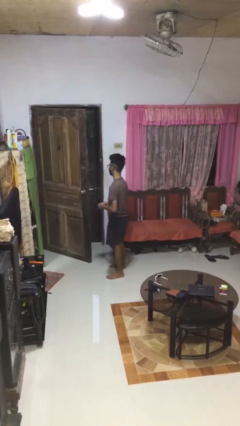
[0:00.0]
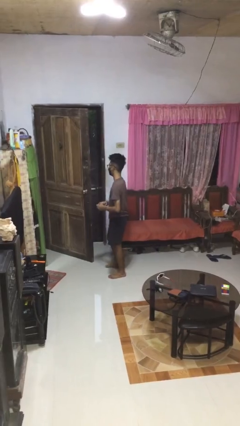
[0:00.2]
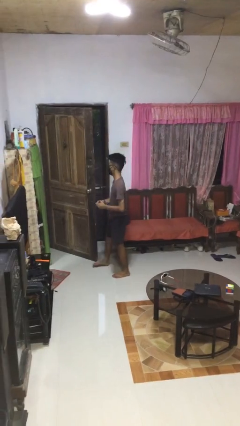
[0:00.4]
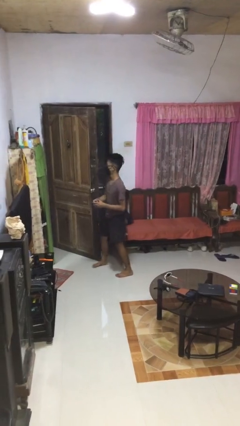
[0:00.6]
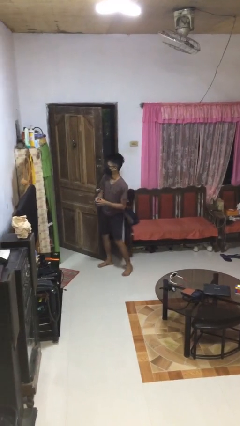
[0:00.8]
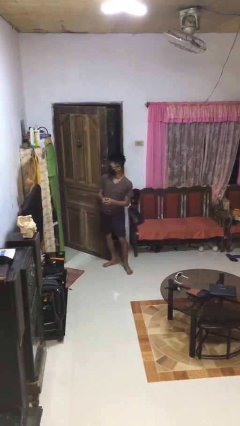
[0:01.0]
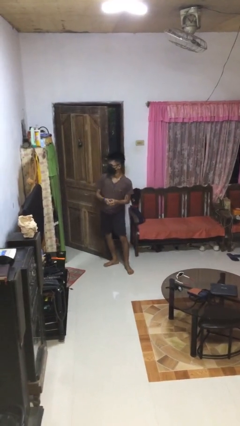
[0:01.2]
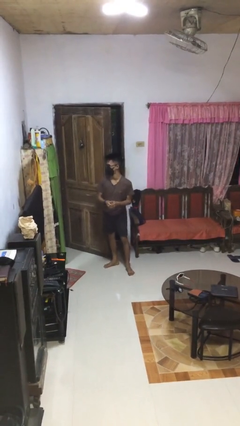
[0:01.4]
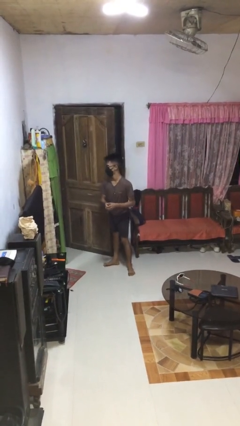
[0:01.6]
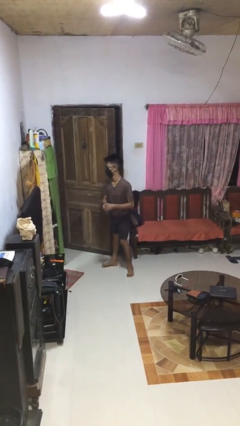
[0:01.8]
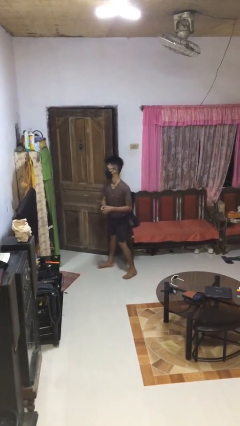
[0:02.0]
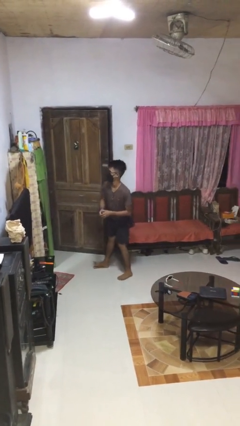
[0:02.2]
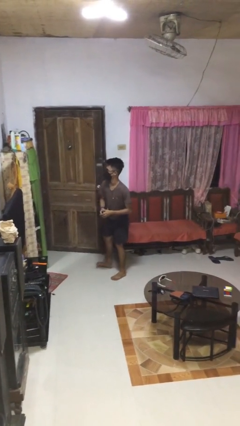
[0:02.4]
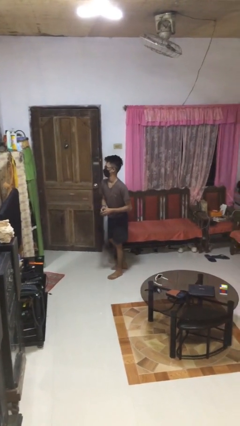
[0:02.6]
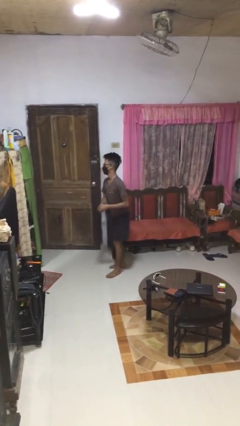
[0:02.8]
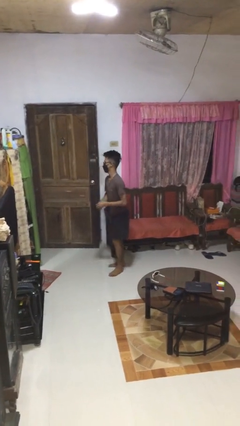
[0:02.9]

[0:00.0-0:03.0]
person closes door with hip

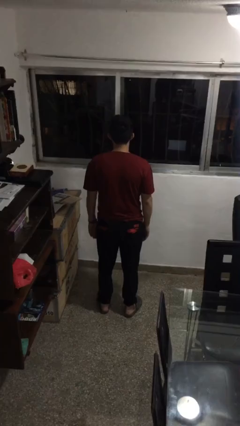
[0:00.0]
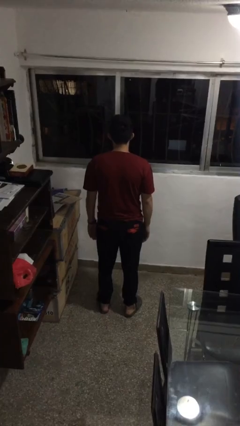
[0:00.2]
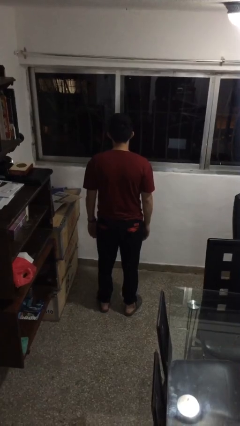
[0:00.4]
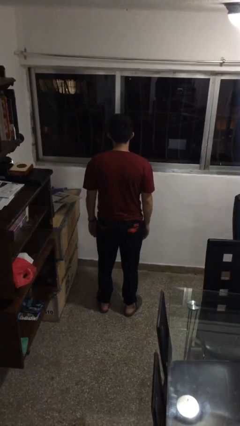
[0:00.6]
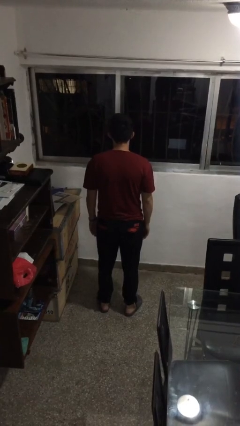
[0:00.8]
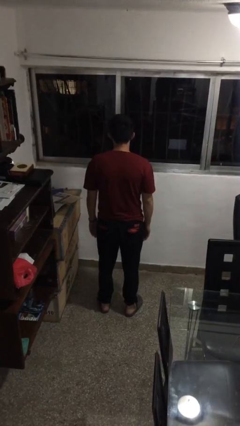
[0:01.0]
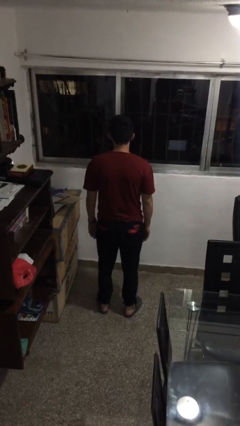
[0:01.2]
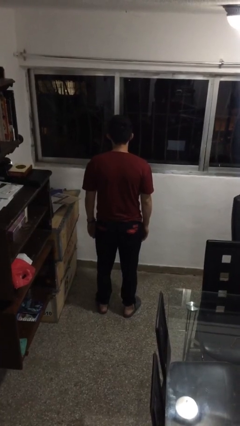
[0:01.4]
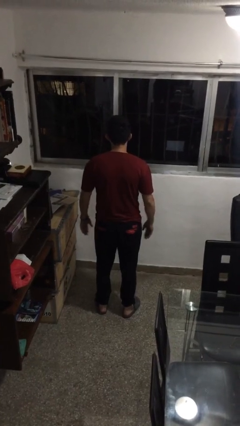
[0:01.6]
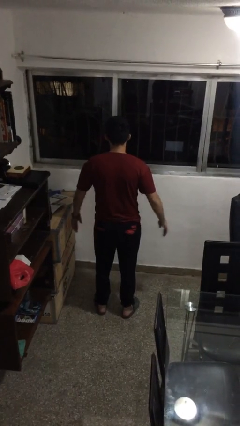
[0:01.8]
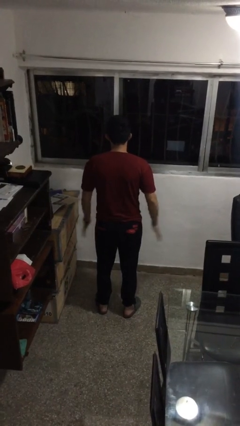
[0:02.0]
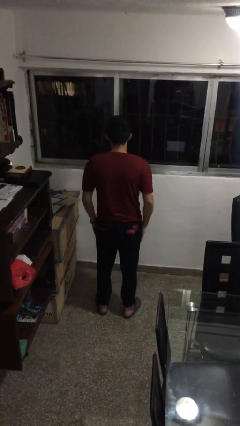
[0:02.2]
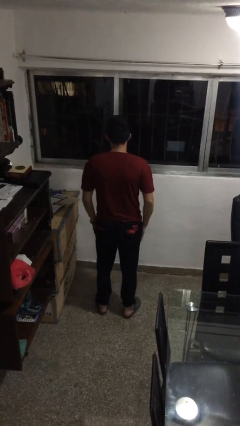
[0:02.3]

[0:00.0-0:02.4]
person slaps hands on thighs

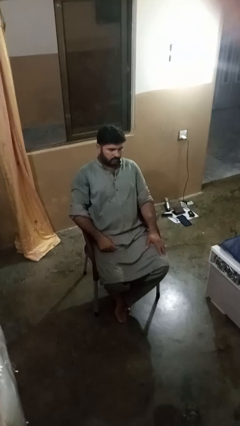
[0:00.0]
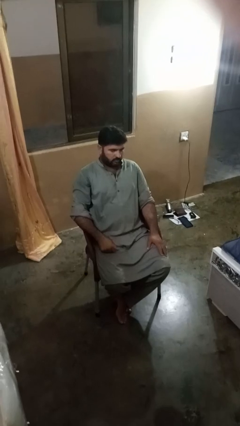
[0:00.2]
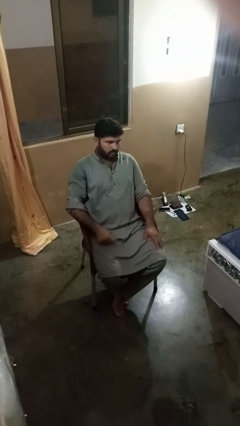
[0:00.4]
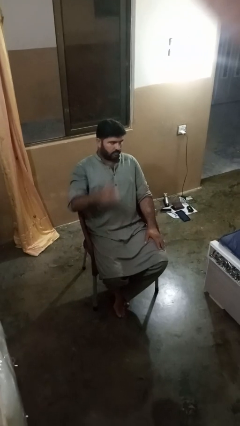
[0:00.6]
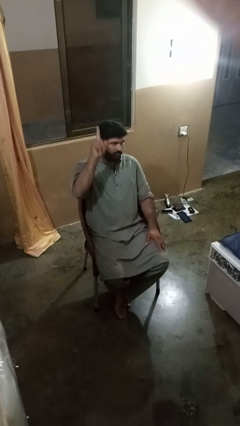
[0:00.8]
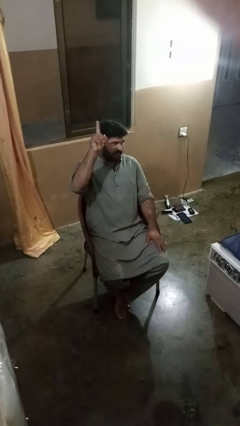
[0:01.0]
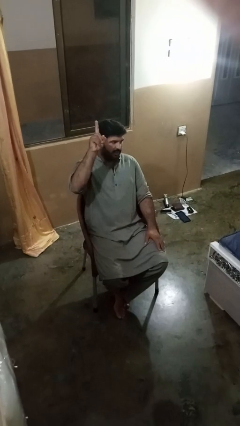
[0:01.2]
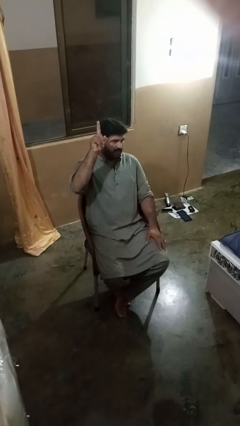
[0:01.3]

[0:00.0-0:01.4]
person gestures number one

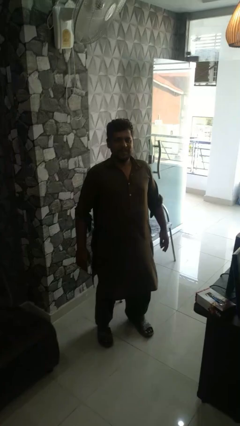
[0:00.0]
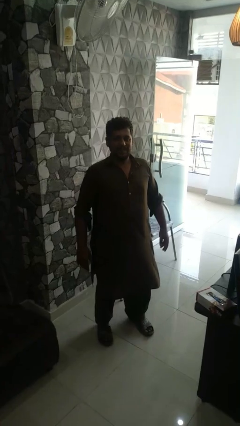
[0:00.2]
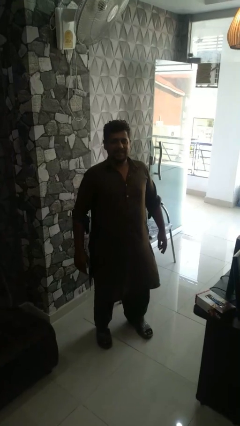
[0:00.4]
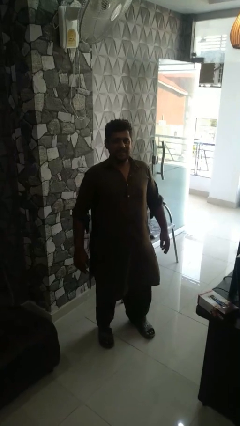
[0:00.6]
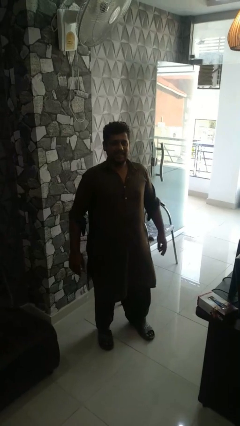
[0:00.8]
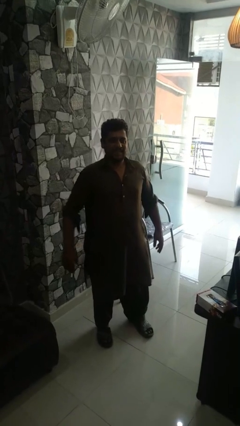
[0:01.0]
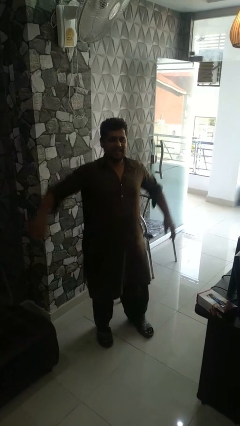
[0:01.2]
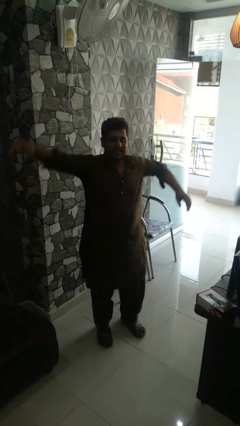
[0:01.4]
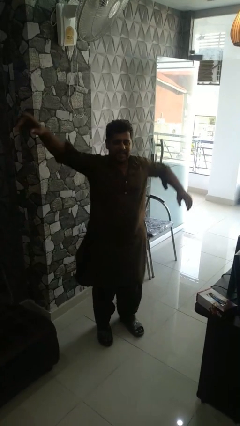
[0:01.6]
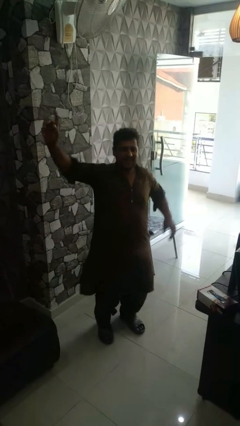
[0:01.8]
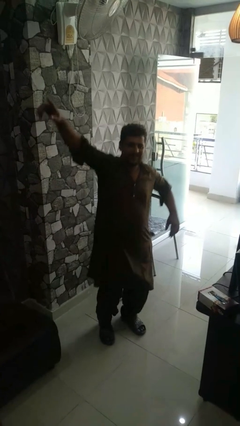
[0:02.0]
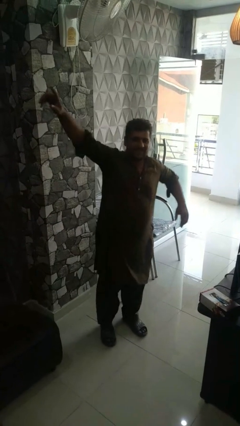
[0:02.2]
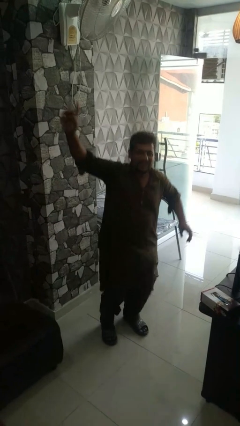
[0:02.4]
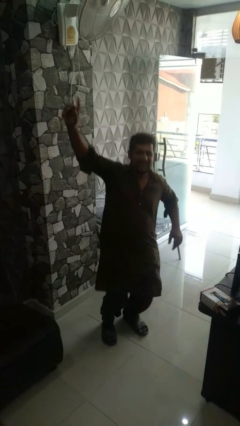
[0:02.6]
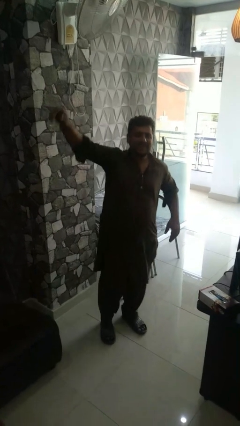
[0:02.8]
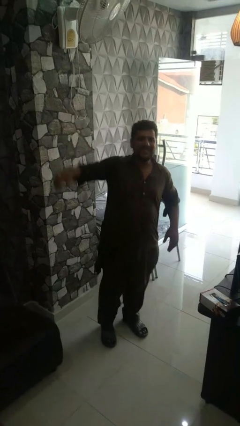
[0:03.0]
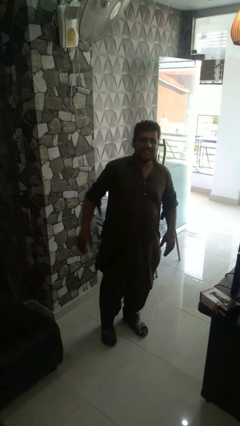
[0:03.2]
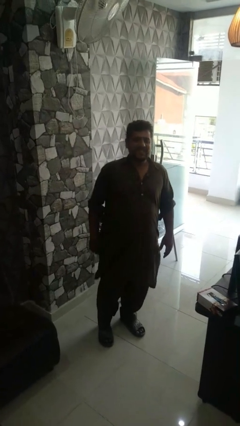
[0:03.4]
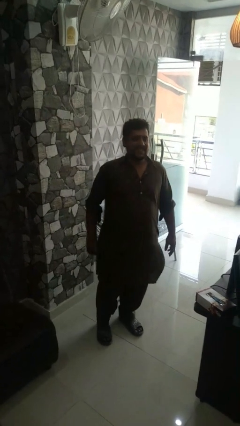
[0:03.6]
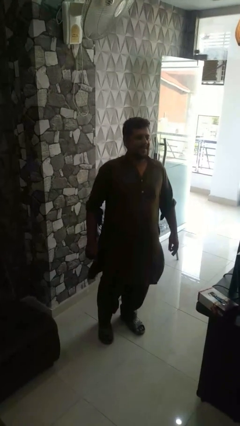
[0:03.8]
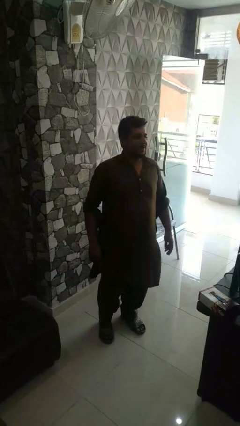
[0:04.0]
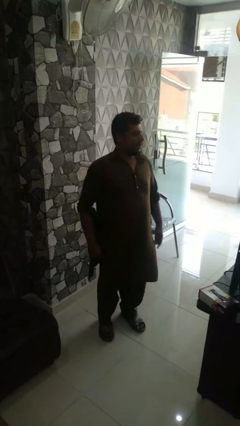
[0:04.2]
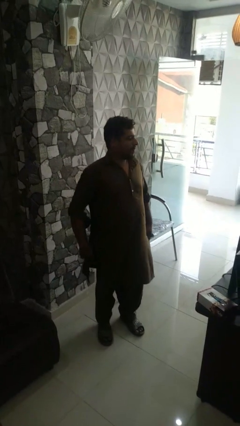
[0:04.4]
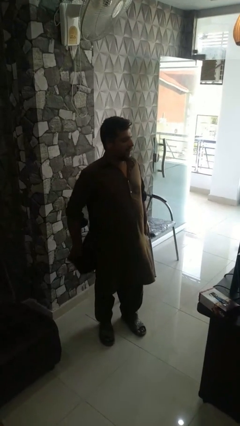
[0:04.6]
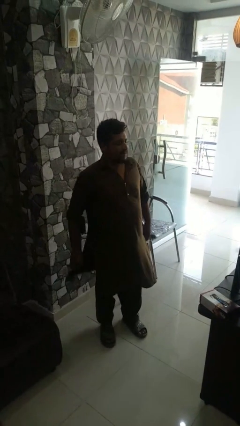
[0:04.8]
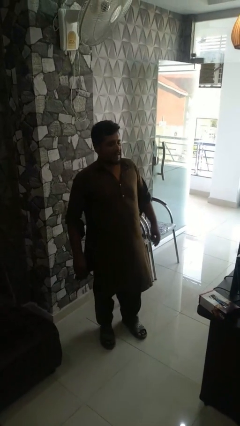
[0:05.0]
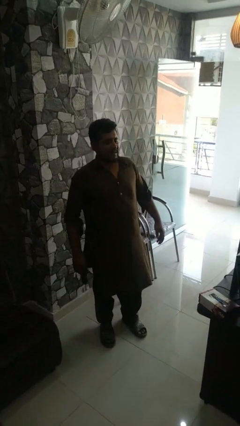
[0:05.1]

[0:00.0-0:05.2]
person dances in place

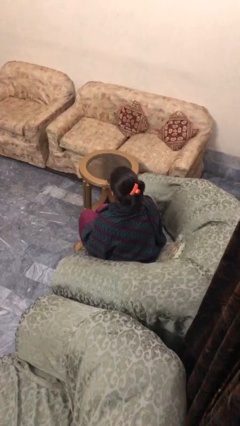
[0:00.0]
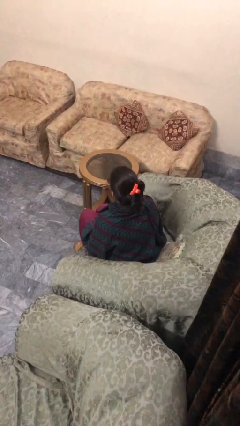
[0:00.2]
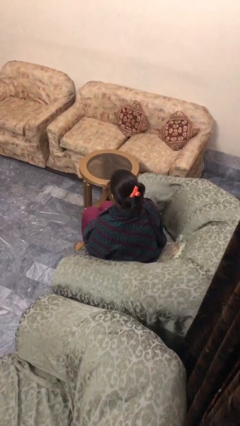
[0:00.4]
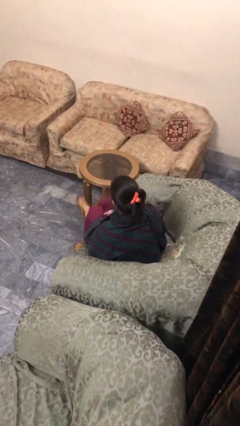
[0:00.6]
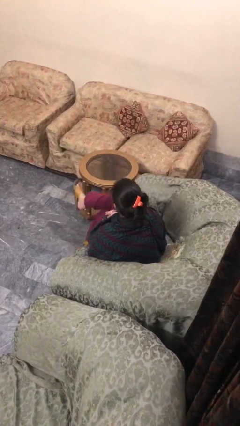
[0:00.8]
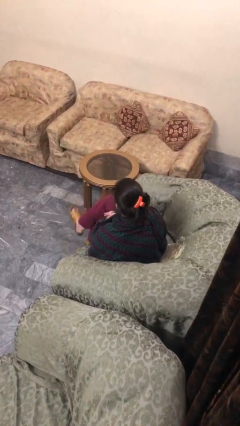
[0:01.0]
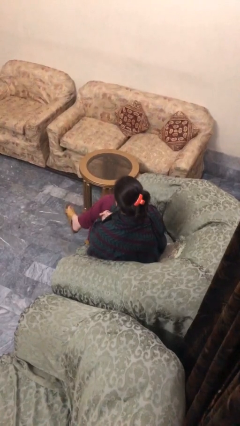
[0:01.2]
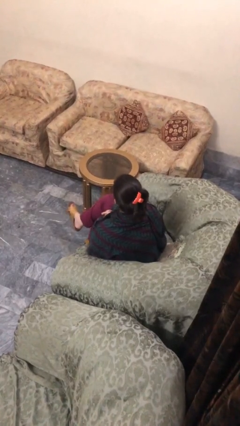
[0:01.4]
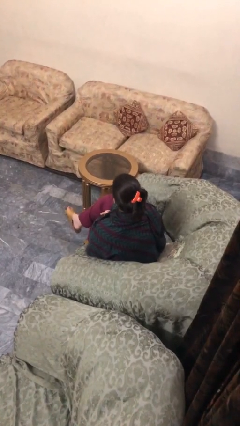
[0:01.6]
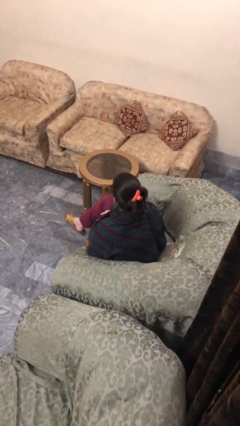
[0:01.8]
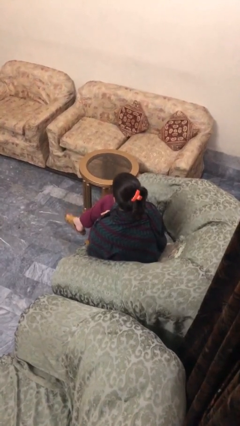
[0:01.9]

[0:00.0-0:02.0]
person crosses legs

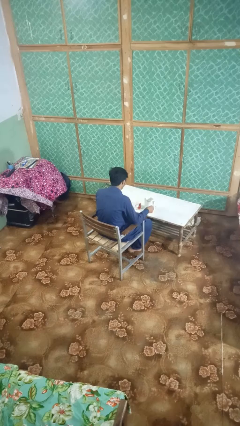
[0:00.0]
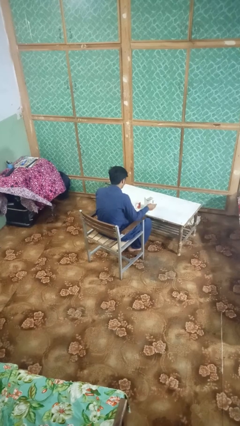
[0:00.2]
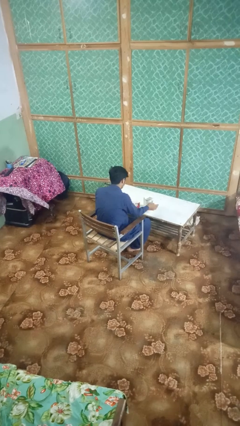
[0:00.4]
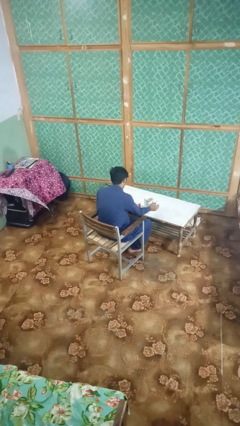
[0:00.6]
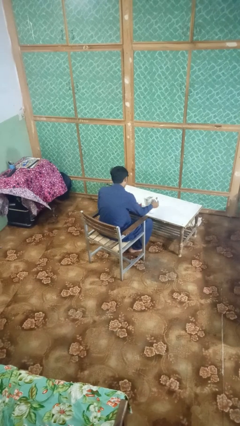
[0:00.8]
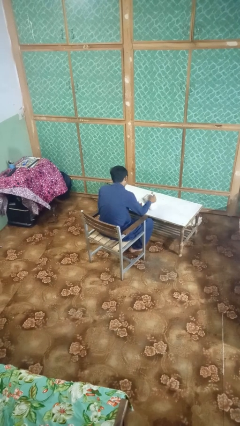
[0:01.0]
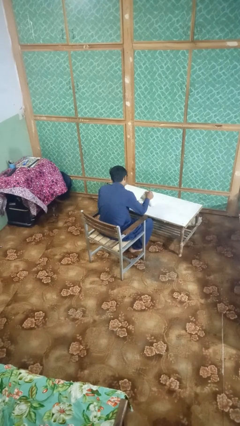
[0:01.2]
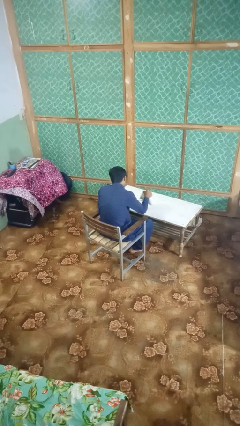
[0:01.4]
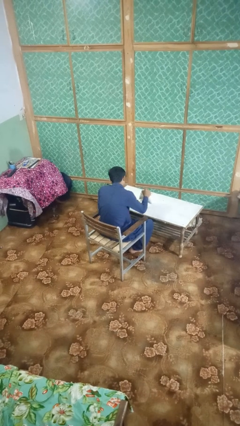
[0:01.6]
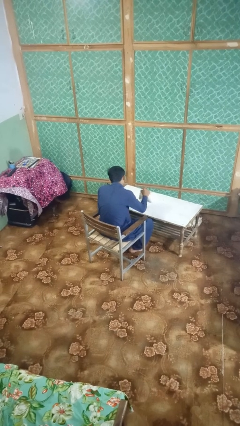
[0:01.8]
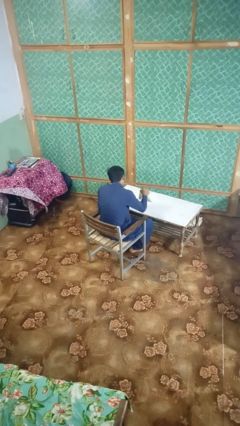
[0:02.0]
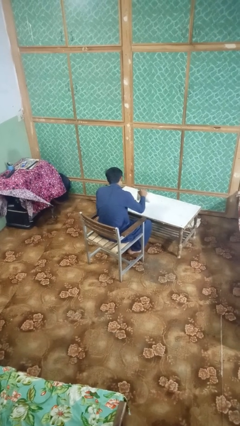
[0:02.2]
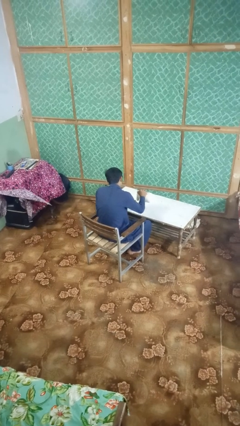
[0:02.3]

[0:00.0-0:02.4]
person pours coffee into mug

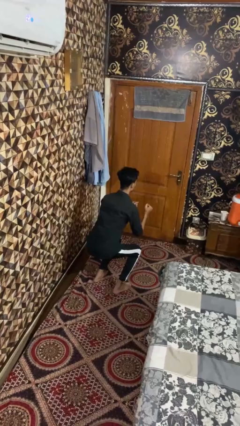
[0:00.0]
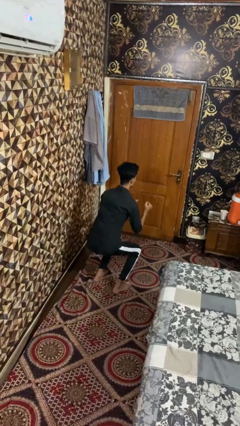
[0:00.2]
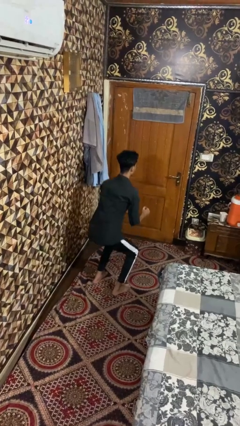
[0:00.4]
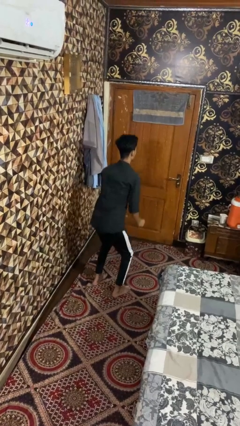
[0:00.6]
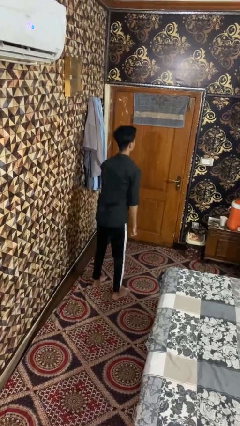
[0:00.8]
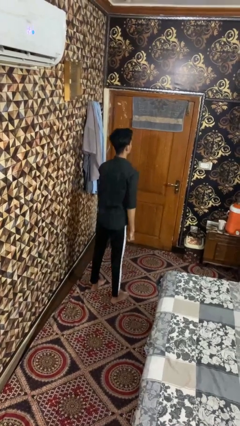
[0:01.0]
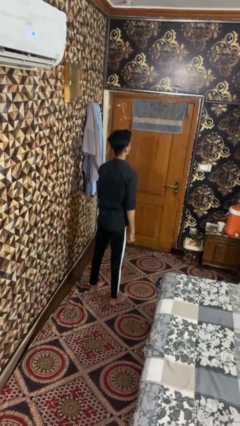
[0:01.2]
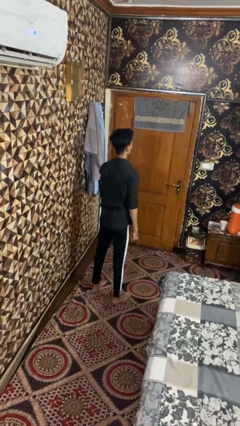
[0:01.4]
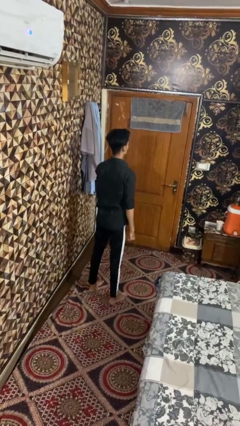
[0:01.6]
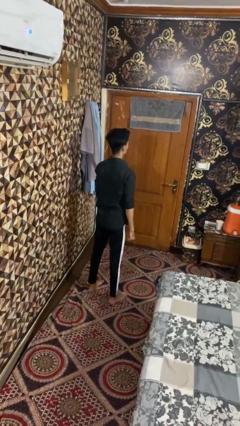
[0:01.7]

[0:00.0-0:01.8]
person stands up
